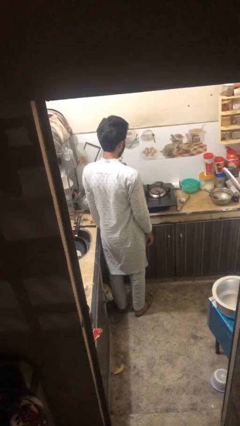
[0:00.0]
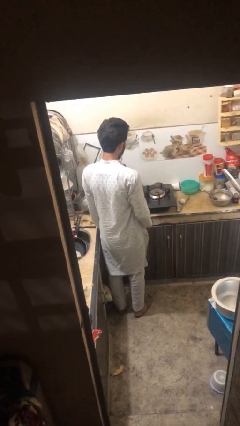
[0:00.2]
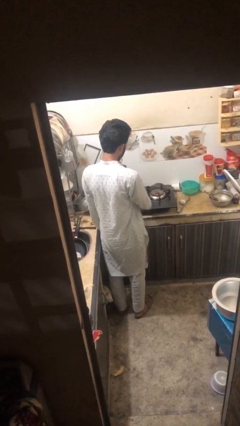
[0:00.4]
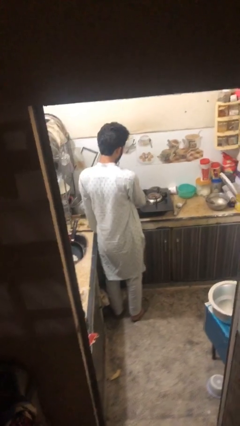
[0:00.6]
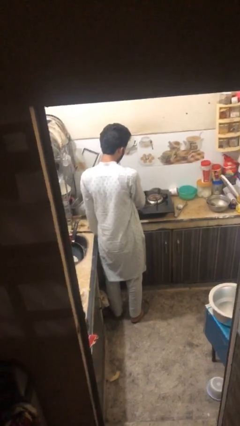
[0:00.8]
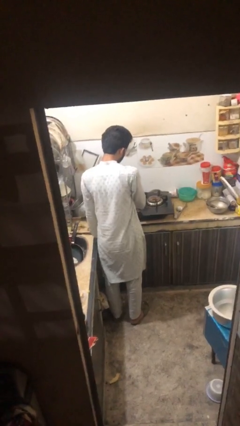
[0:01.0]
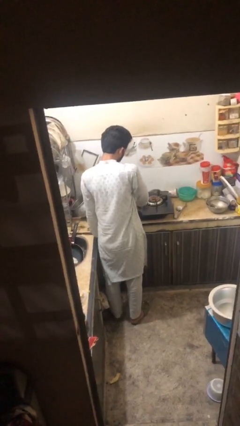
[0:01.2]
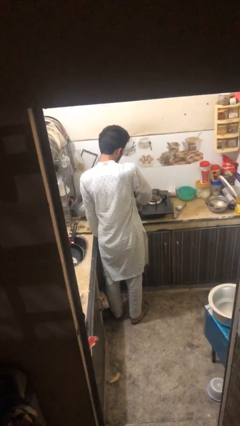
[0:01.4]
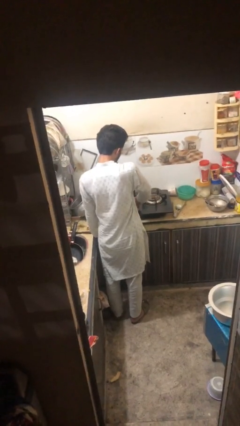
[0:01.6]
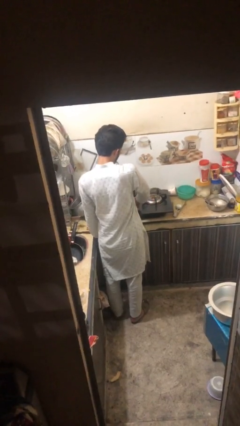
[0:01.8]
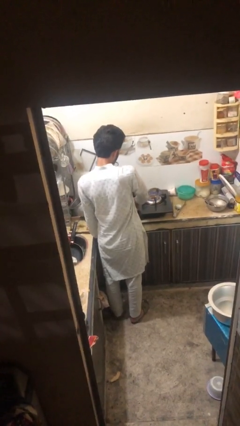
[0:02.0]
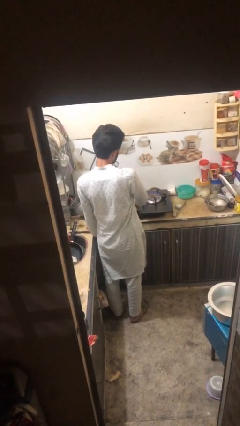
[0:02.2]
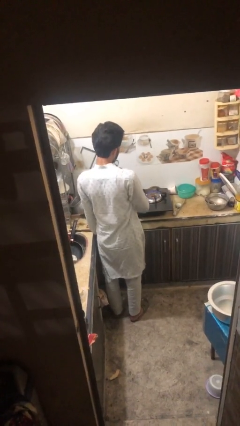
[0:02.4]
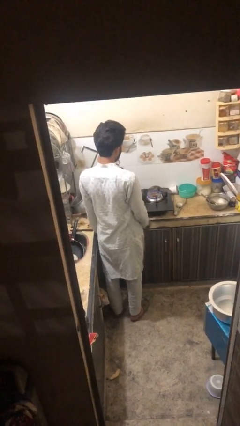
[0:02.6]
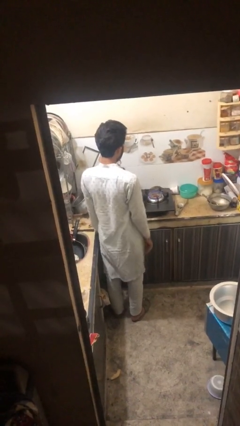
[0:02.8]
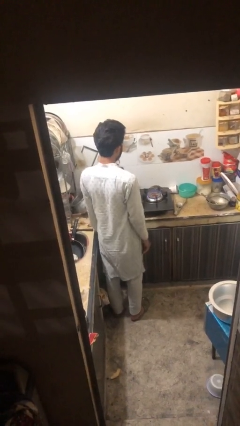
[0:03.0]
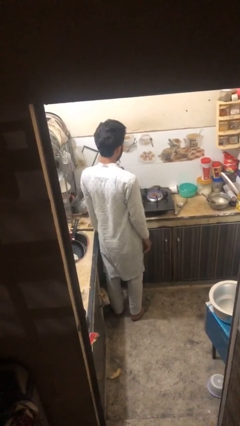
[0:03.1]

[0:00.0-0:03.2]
person turns on stovetop

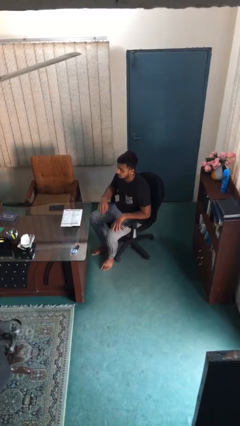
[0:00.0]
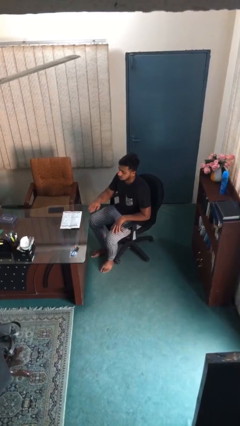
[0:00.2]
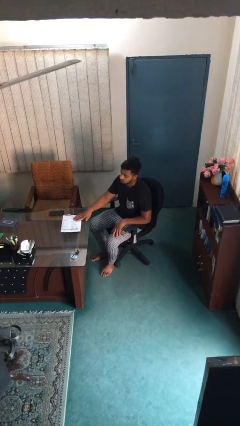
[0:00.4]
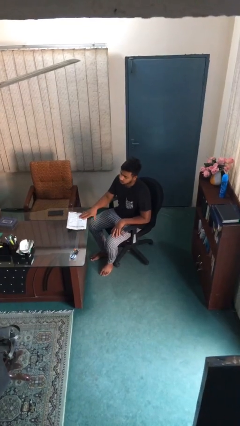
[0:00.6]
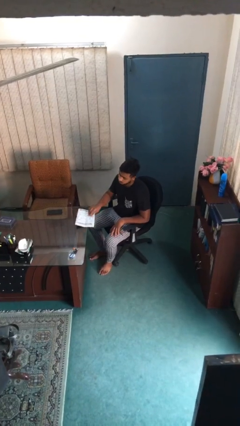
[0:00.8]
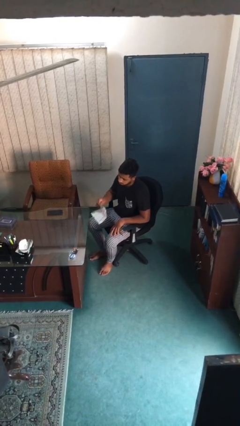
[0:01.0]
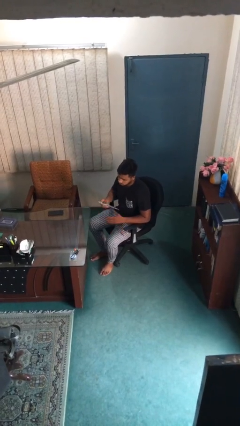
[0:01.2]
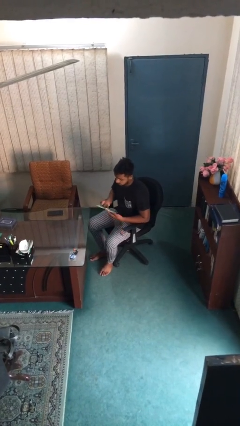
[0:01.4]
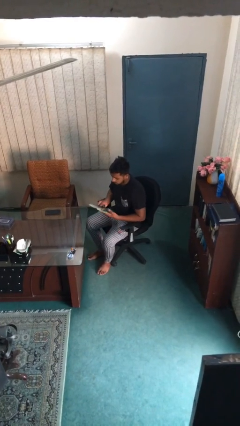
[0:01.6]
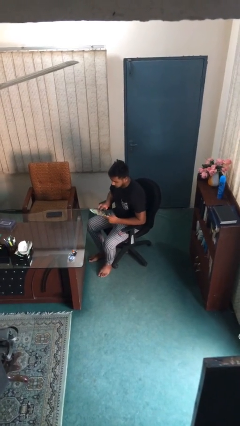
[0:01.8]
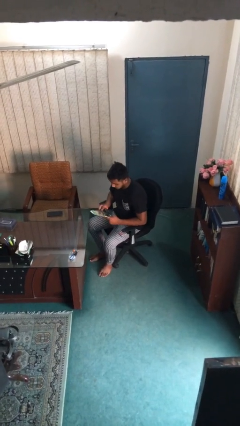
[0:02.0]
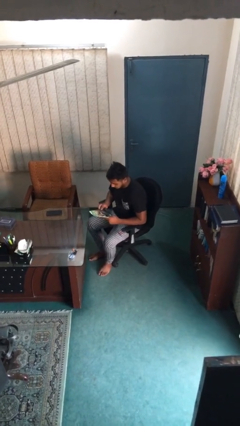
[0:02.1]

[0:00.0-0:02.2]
person picks up object from table

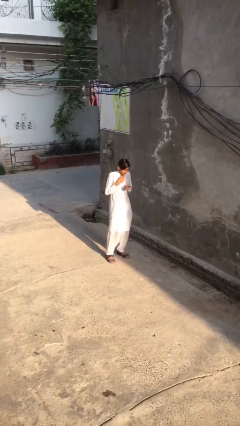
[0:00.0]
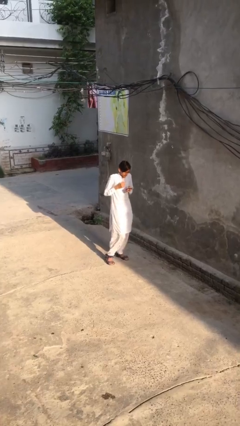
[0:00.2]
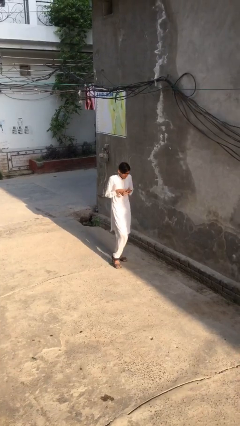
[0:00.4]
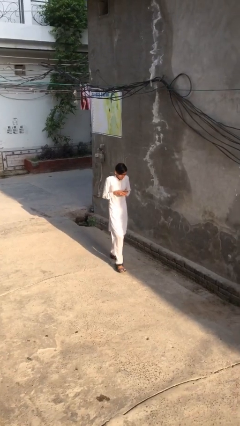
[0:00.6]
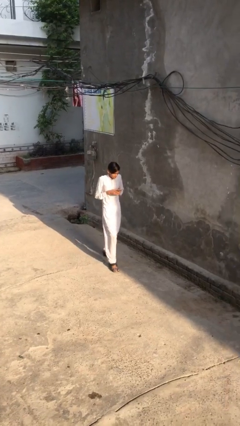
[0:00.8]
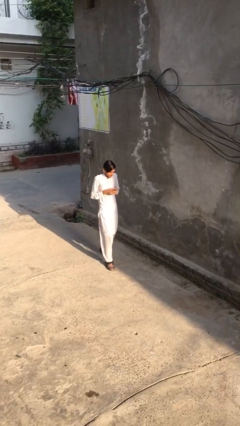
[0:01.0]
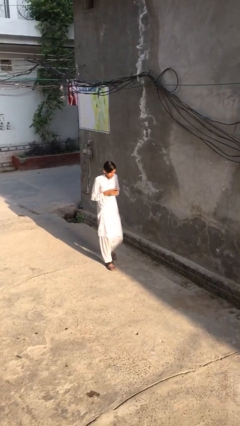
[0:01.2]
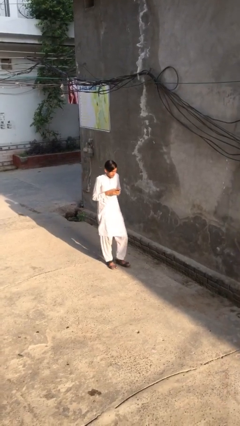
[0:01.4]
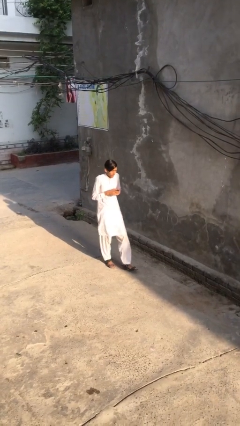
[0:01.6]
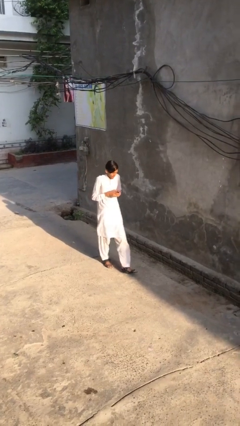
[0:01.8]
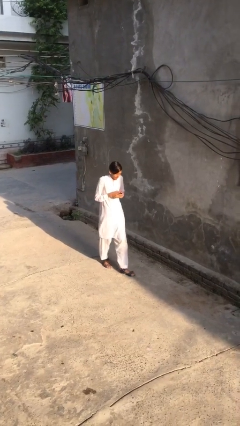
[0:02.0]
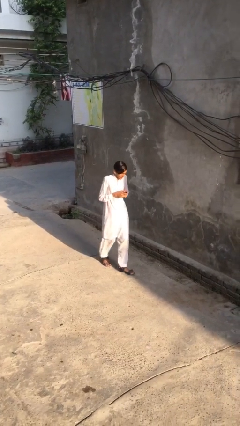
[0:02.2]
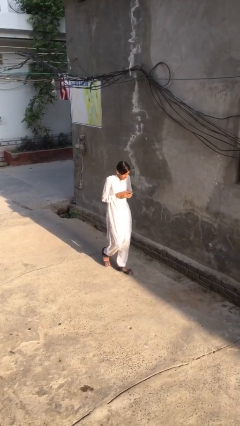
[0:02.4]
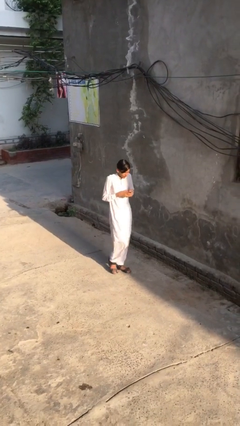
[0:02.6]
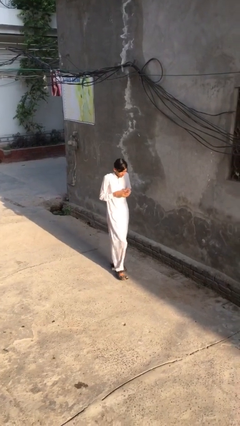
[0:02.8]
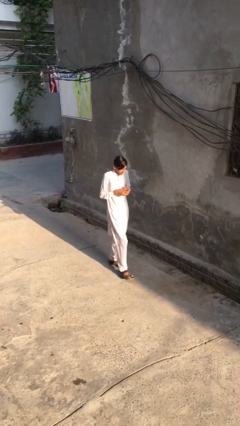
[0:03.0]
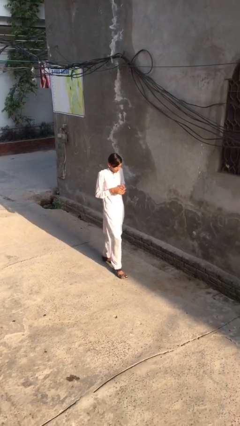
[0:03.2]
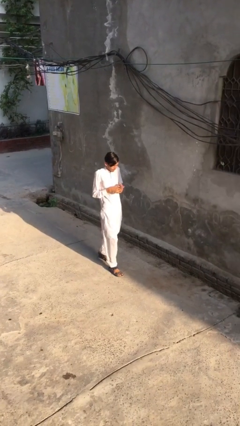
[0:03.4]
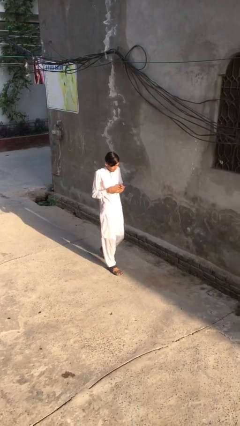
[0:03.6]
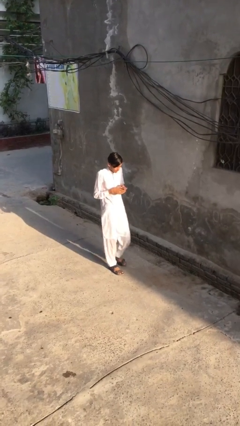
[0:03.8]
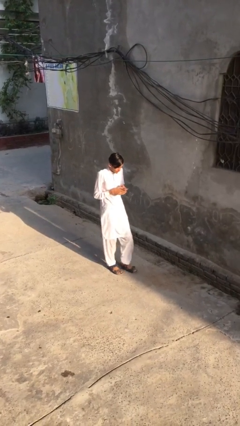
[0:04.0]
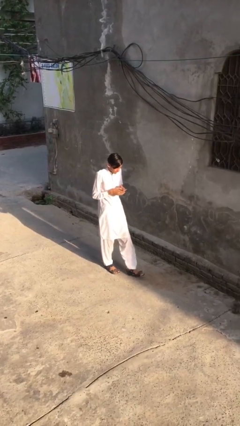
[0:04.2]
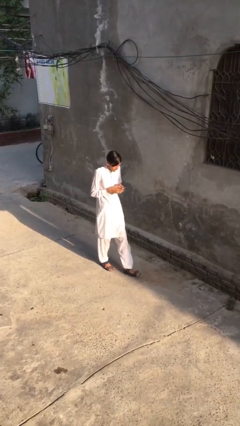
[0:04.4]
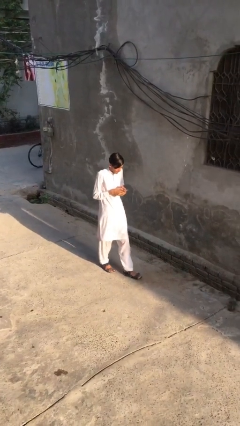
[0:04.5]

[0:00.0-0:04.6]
person texts on phone

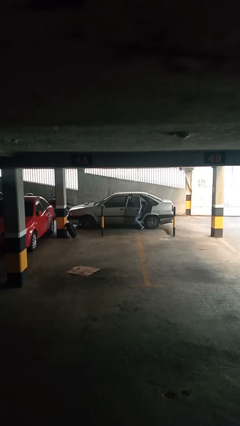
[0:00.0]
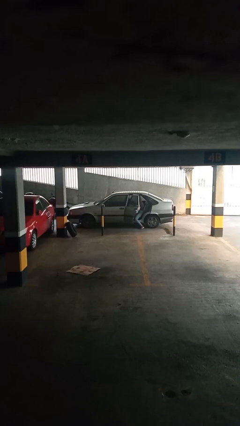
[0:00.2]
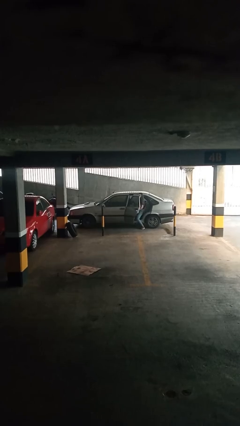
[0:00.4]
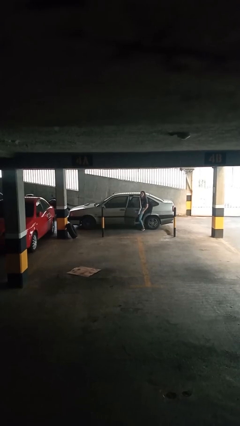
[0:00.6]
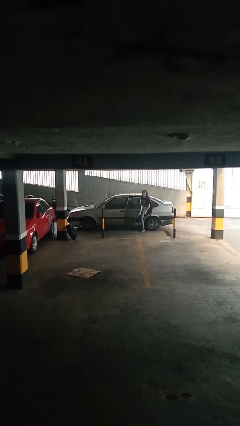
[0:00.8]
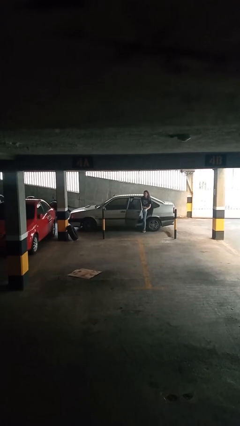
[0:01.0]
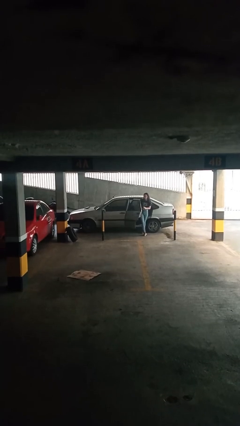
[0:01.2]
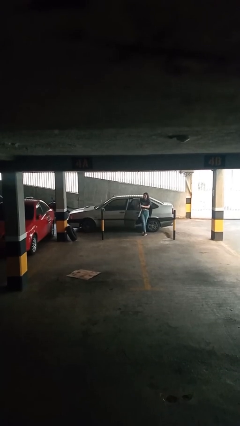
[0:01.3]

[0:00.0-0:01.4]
car drops off person

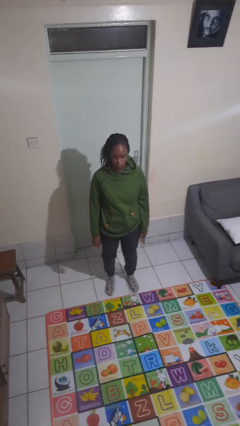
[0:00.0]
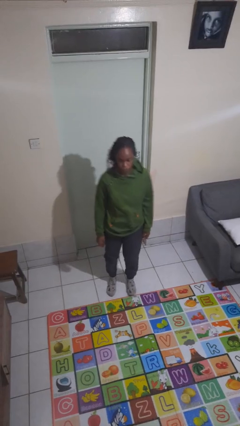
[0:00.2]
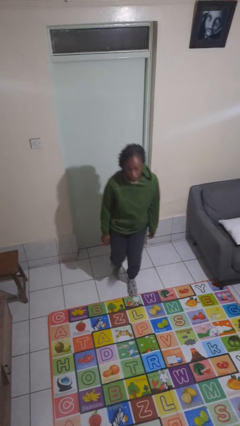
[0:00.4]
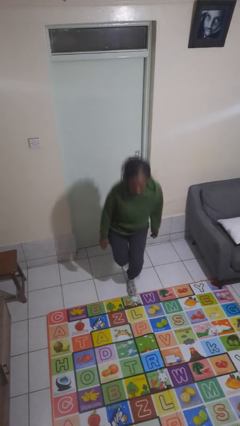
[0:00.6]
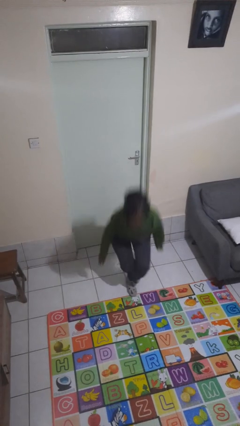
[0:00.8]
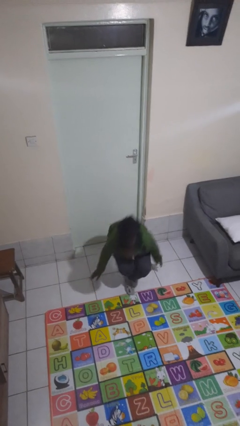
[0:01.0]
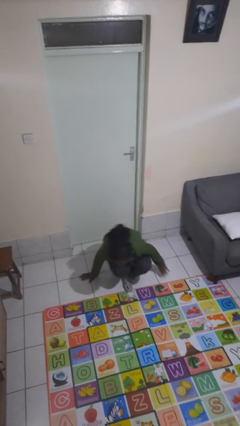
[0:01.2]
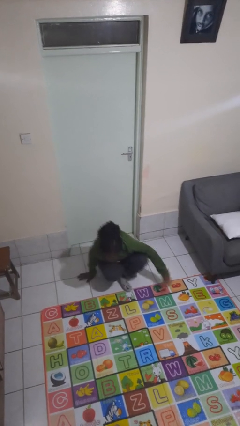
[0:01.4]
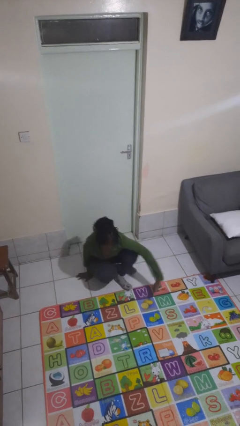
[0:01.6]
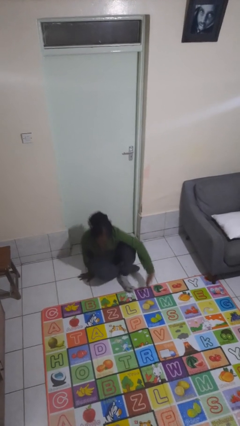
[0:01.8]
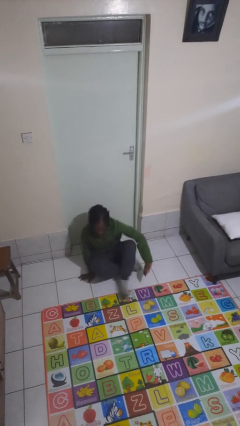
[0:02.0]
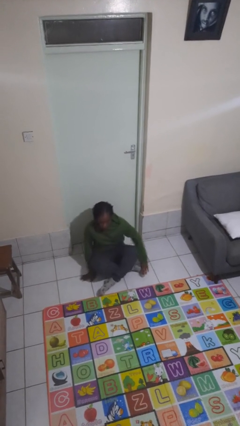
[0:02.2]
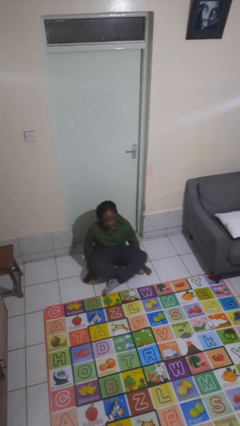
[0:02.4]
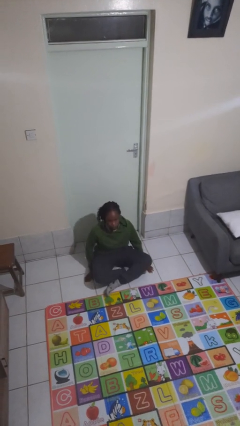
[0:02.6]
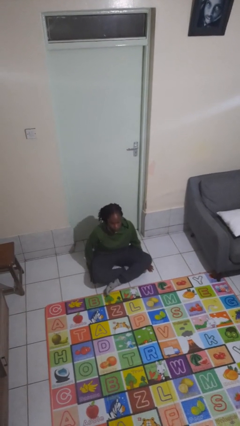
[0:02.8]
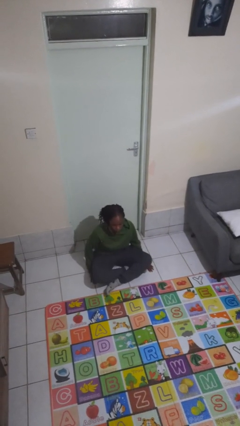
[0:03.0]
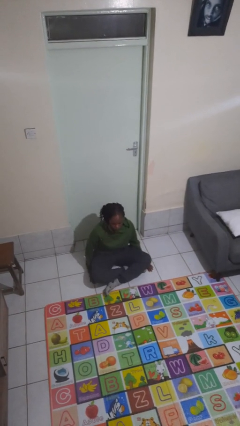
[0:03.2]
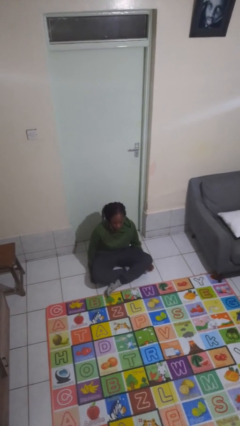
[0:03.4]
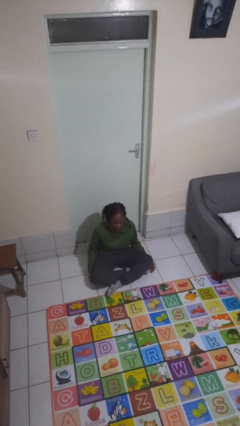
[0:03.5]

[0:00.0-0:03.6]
person sits crisscross

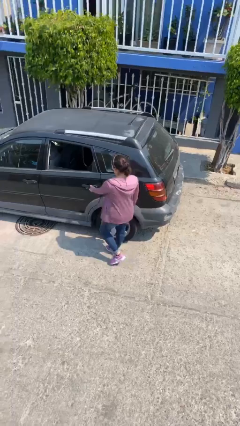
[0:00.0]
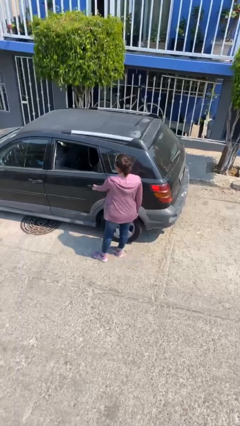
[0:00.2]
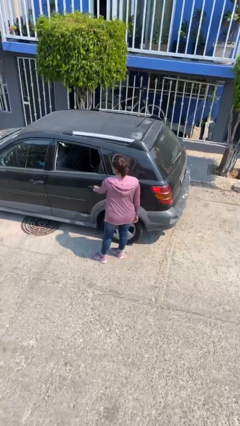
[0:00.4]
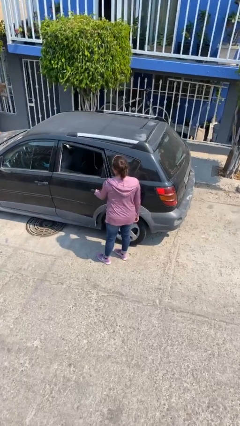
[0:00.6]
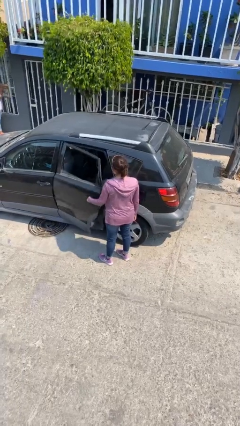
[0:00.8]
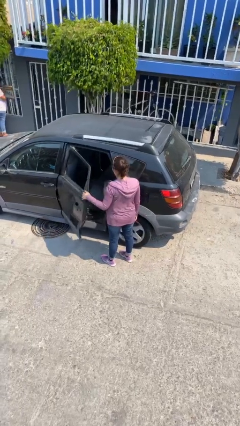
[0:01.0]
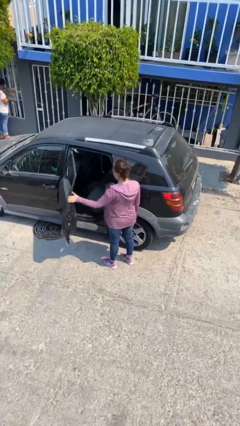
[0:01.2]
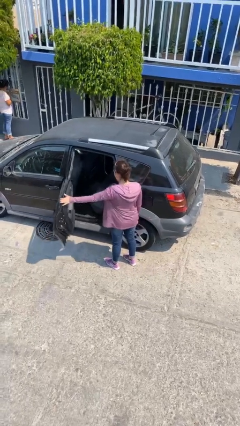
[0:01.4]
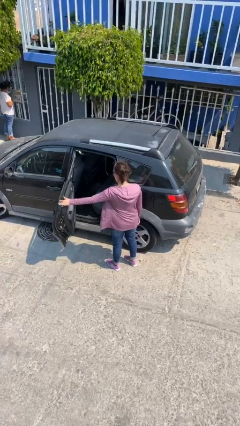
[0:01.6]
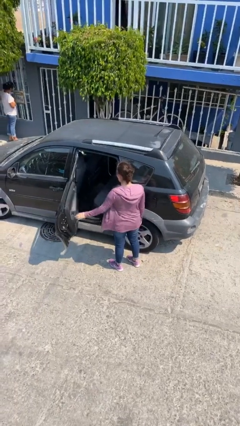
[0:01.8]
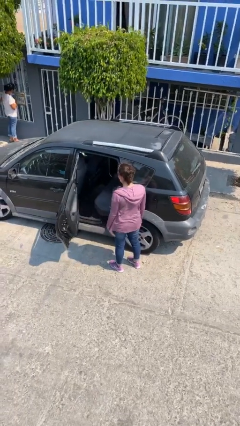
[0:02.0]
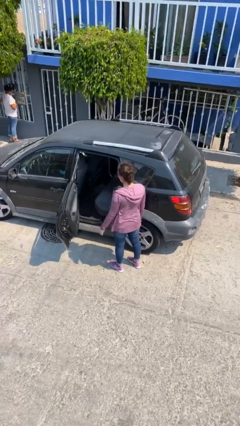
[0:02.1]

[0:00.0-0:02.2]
person opens car door

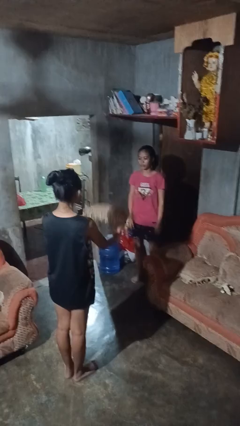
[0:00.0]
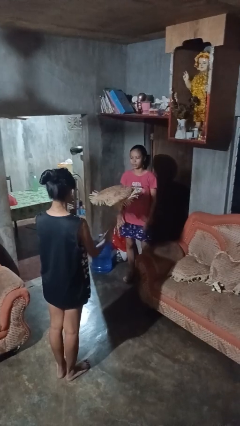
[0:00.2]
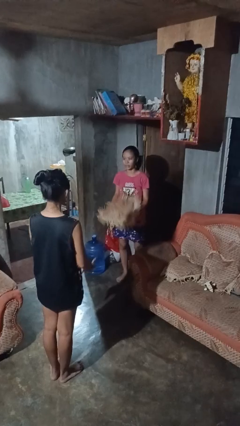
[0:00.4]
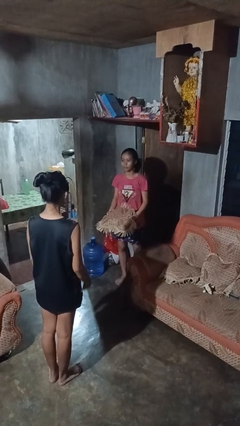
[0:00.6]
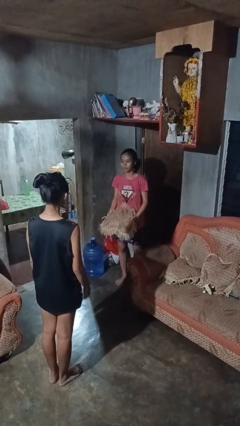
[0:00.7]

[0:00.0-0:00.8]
person catches object from person
